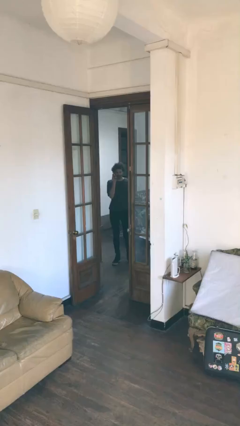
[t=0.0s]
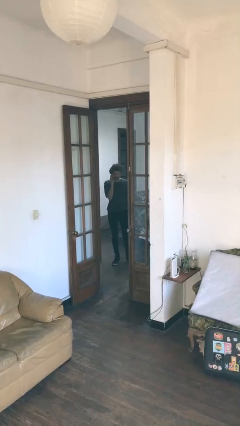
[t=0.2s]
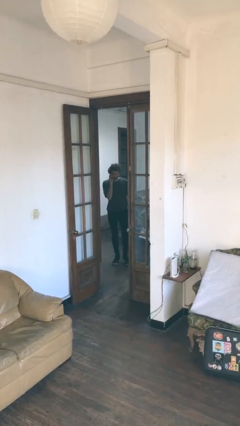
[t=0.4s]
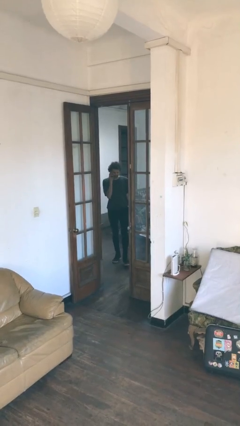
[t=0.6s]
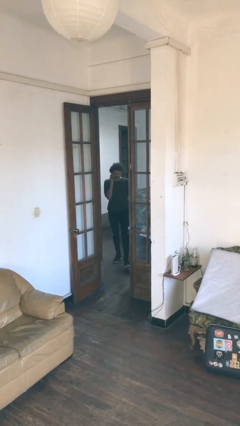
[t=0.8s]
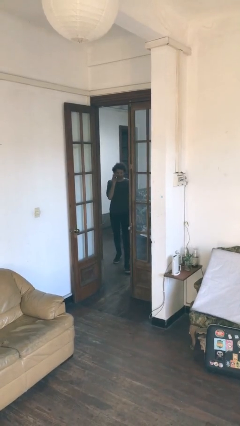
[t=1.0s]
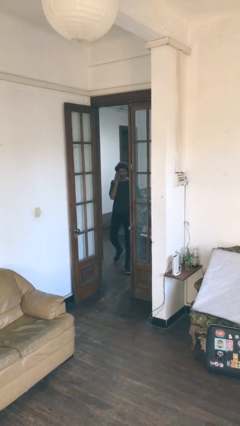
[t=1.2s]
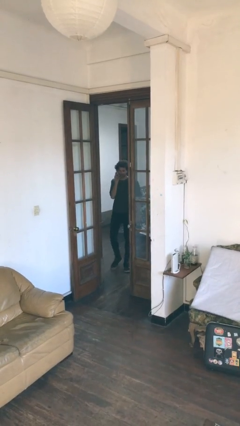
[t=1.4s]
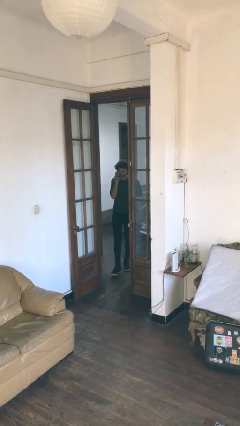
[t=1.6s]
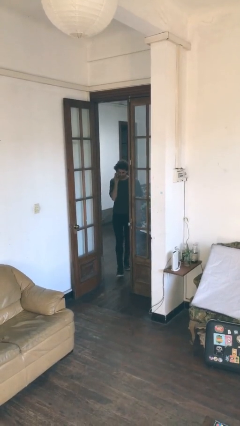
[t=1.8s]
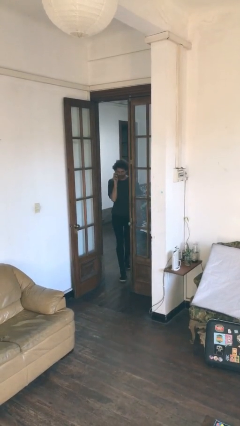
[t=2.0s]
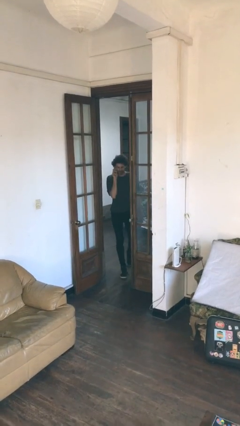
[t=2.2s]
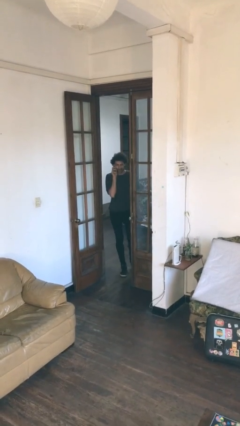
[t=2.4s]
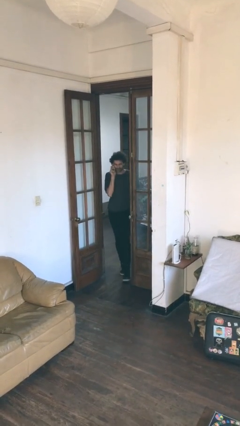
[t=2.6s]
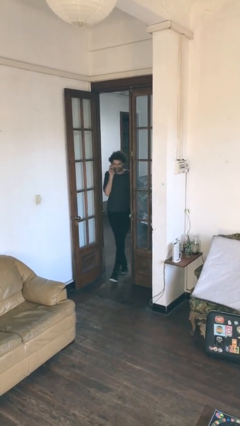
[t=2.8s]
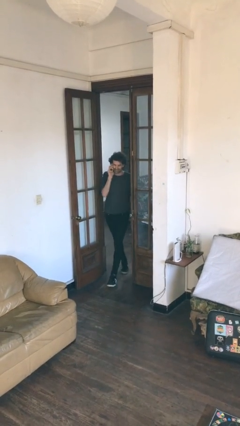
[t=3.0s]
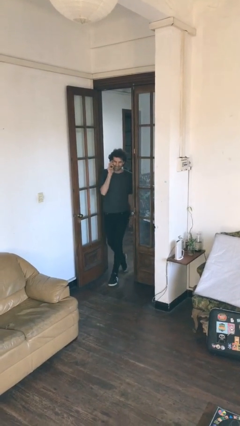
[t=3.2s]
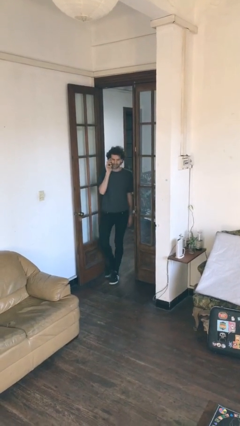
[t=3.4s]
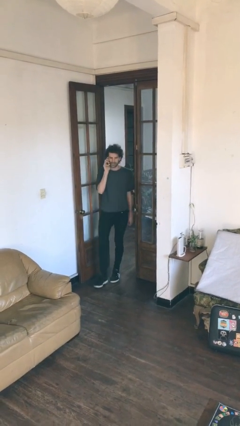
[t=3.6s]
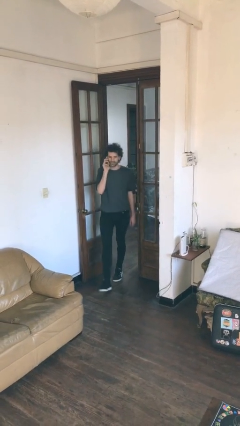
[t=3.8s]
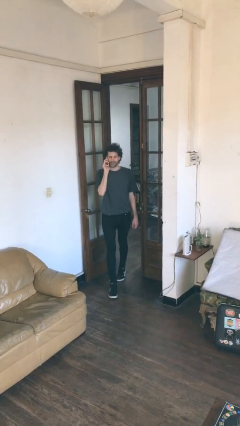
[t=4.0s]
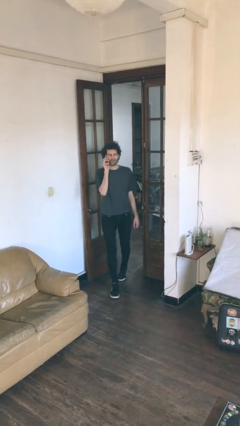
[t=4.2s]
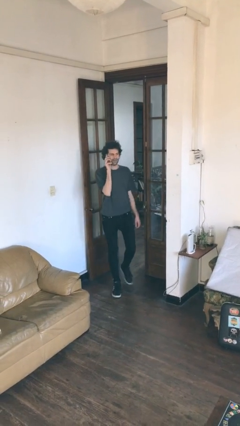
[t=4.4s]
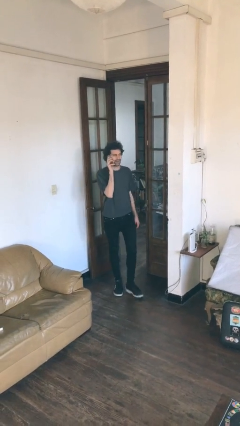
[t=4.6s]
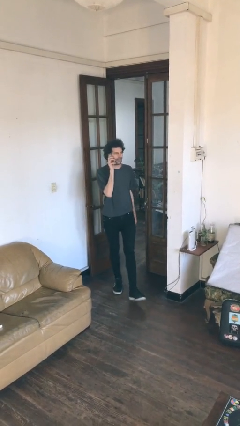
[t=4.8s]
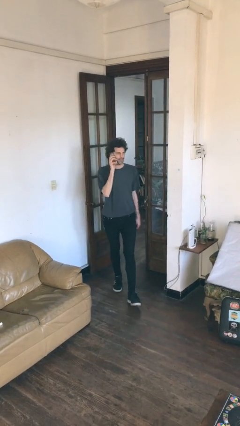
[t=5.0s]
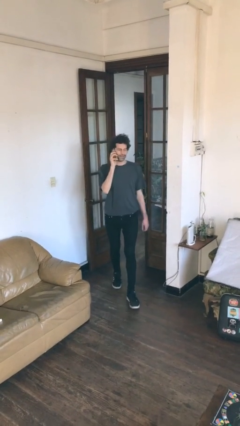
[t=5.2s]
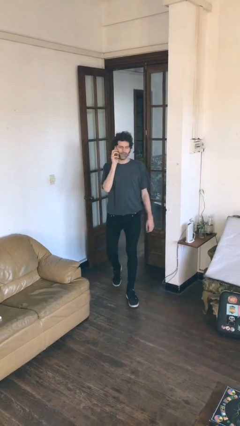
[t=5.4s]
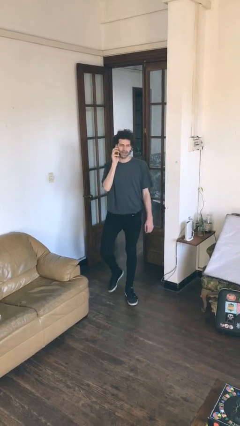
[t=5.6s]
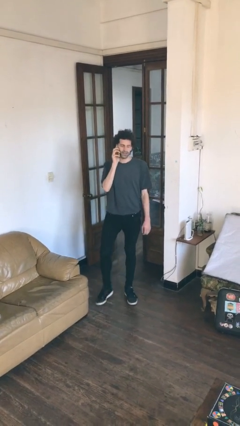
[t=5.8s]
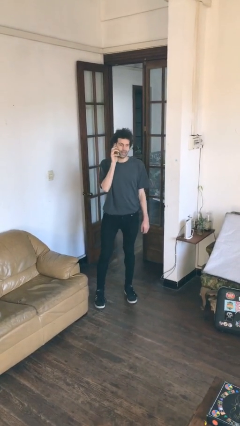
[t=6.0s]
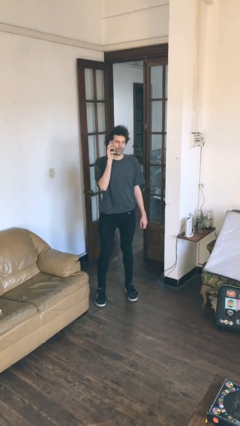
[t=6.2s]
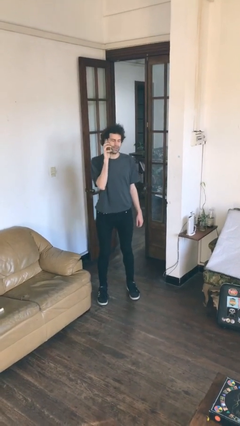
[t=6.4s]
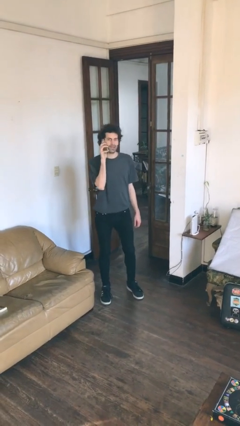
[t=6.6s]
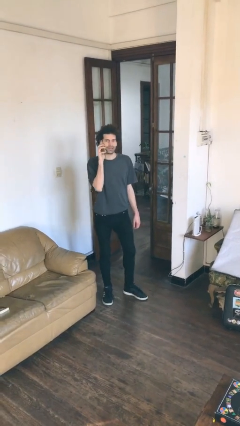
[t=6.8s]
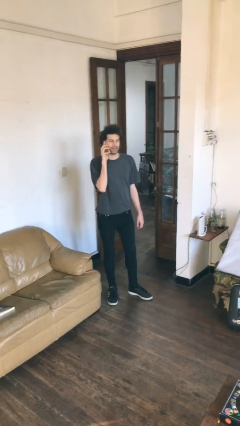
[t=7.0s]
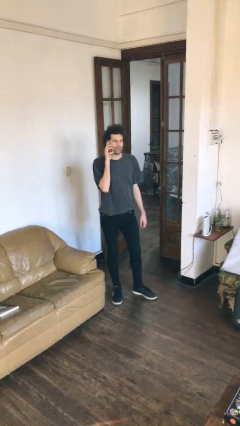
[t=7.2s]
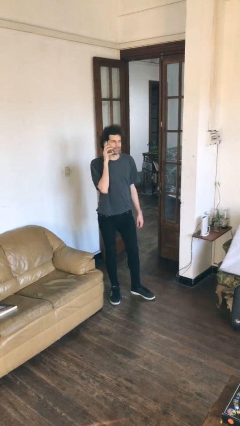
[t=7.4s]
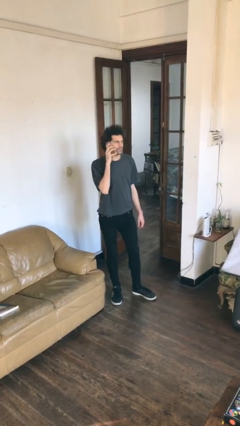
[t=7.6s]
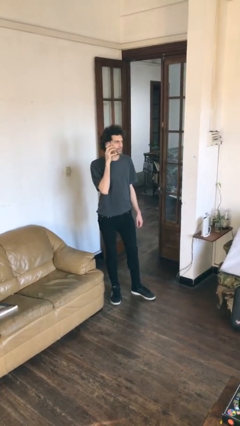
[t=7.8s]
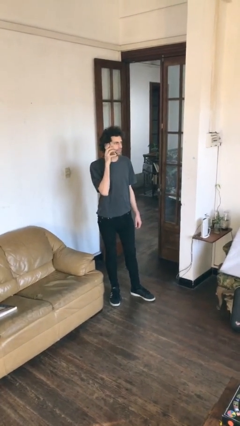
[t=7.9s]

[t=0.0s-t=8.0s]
person enters scene through structure

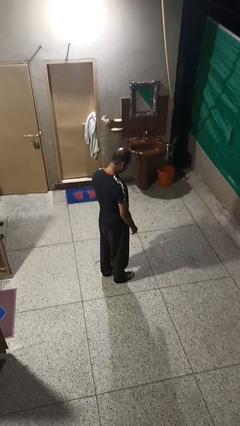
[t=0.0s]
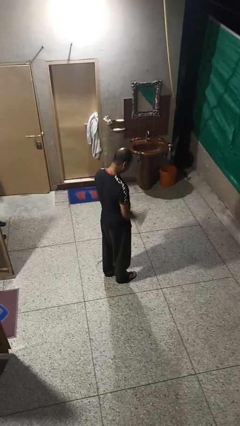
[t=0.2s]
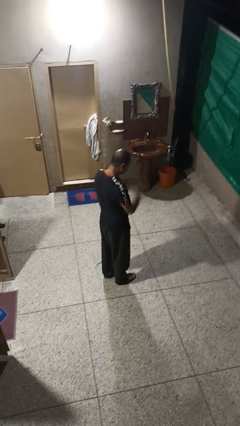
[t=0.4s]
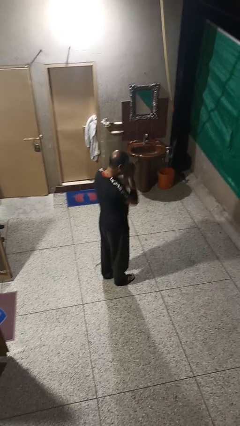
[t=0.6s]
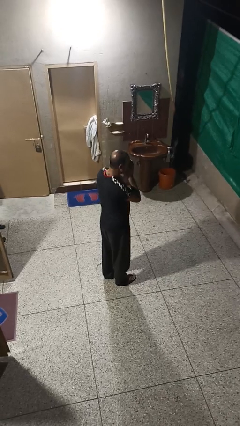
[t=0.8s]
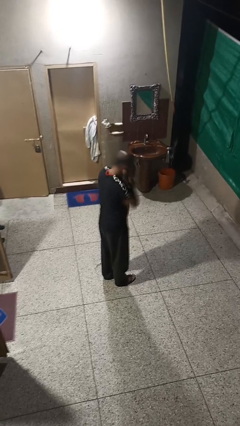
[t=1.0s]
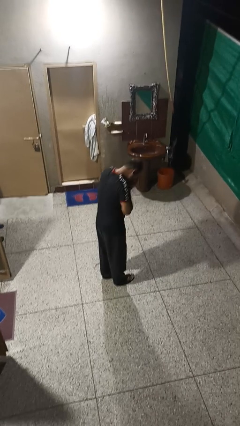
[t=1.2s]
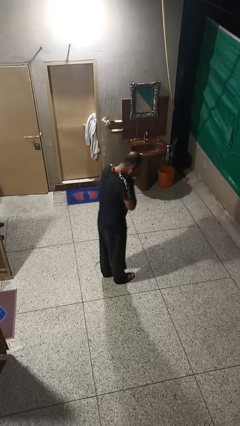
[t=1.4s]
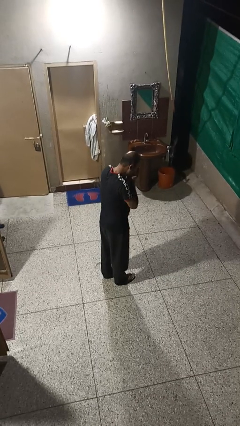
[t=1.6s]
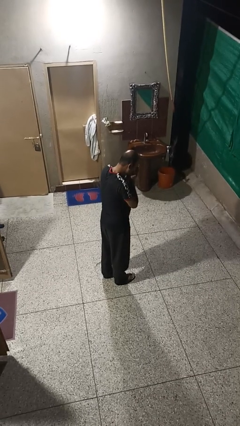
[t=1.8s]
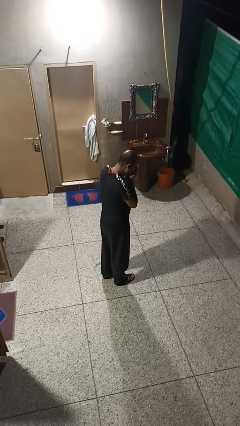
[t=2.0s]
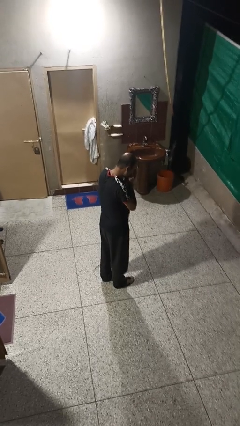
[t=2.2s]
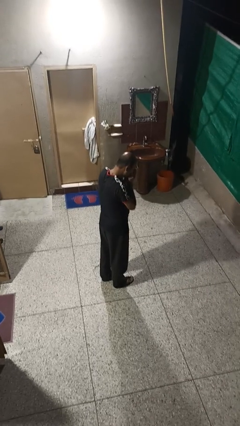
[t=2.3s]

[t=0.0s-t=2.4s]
person sneezes into hand

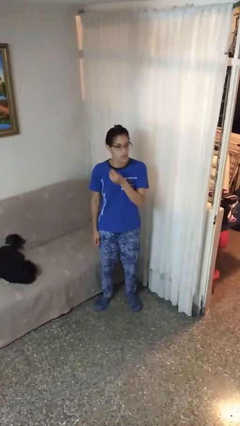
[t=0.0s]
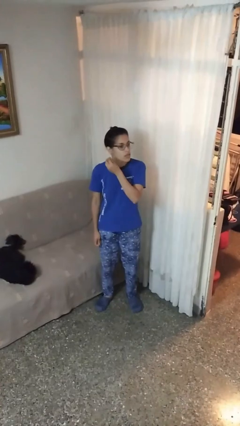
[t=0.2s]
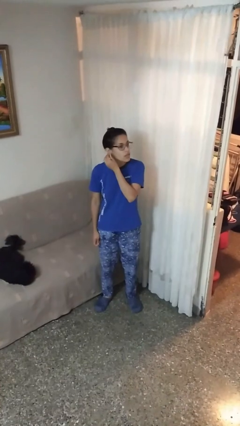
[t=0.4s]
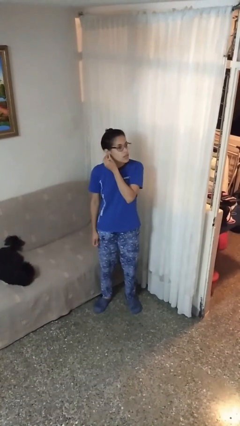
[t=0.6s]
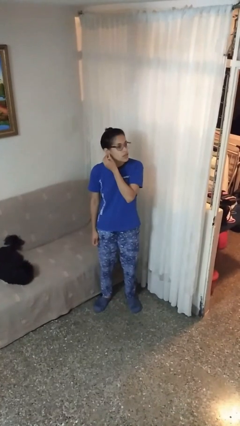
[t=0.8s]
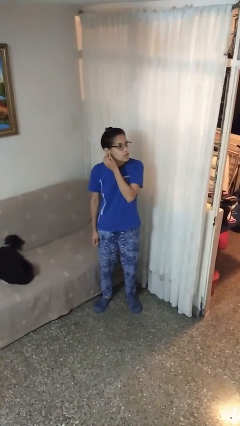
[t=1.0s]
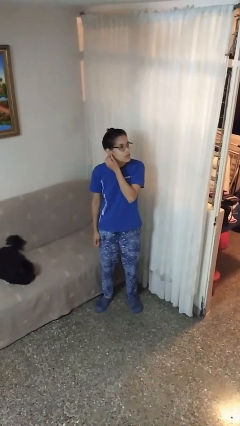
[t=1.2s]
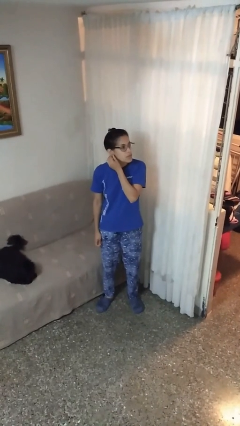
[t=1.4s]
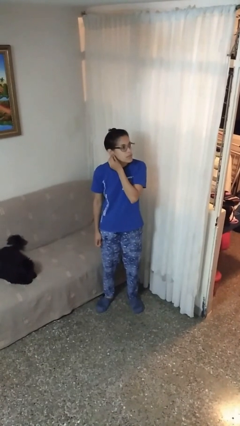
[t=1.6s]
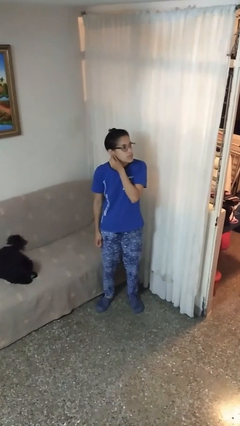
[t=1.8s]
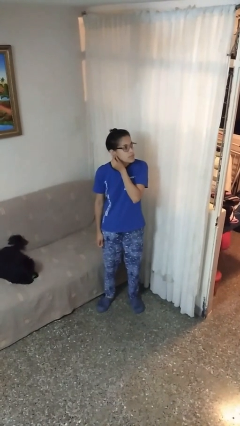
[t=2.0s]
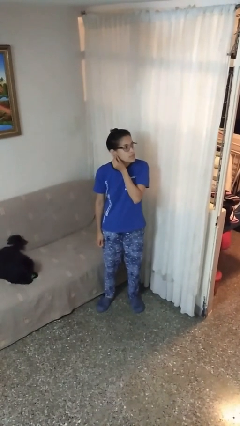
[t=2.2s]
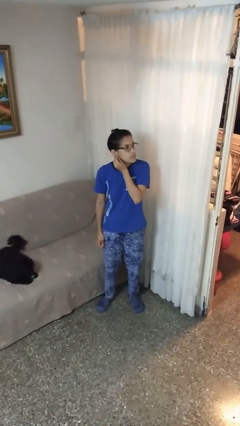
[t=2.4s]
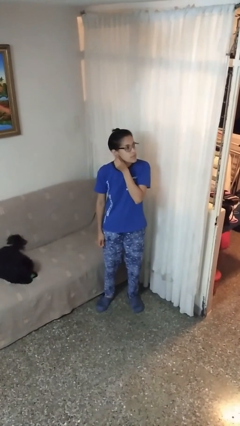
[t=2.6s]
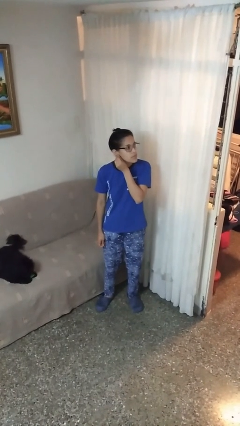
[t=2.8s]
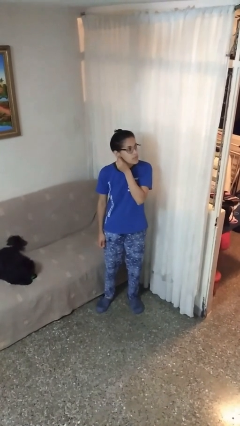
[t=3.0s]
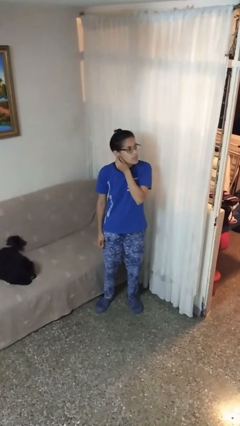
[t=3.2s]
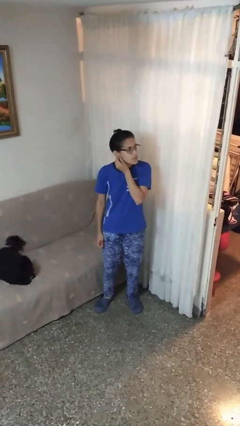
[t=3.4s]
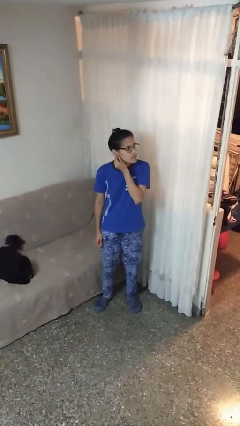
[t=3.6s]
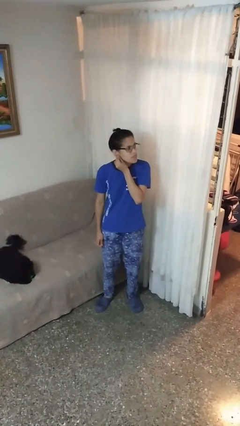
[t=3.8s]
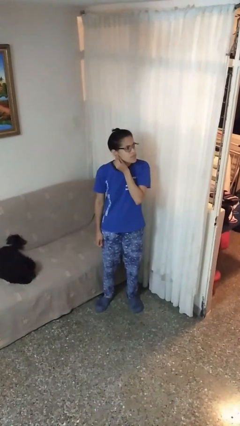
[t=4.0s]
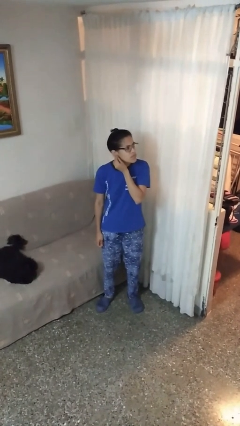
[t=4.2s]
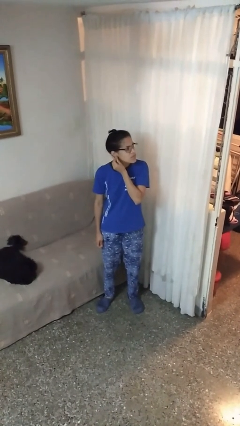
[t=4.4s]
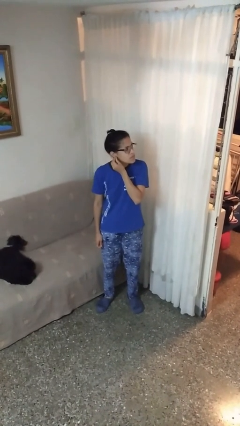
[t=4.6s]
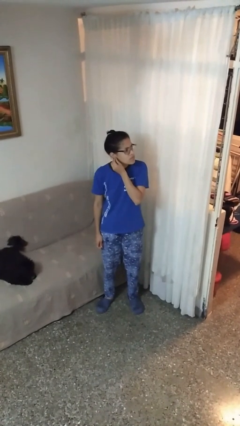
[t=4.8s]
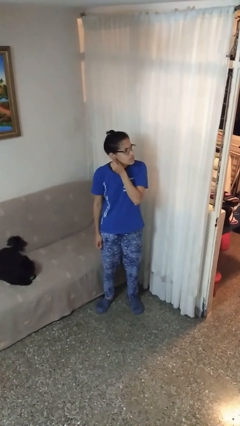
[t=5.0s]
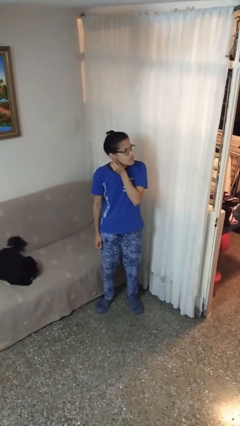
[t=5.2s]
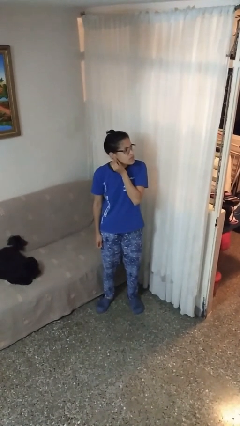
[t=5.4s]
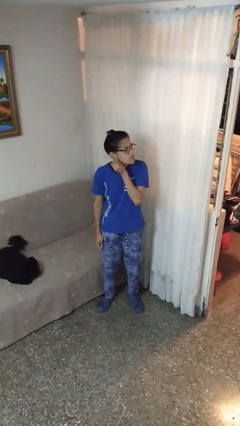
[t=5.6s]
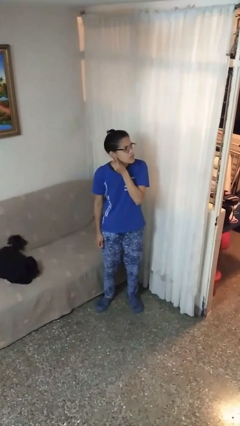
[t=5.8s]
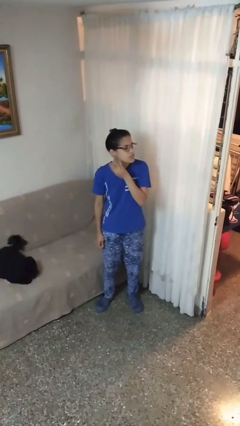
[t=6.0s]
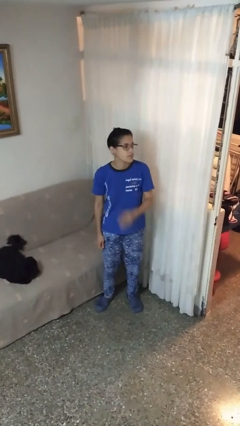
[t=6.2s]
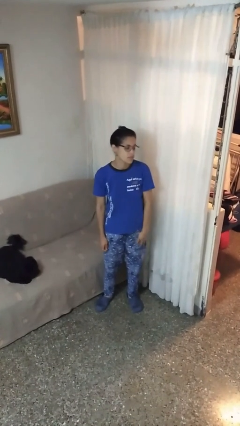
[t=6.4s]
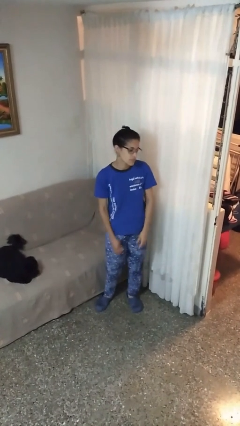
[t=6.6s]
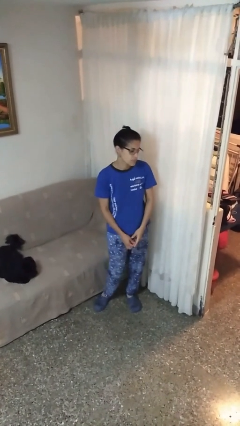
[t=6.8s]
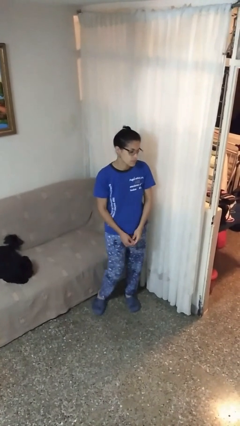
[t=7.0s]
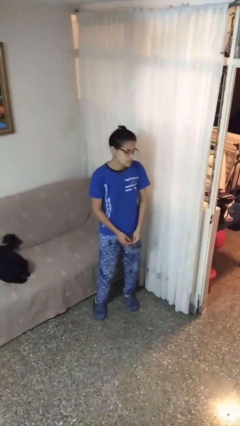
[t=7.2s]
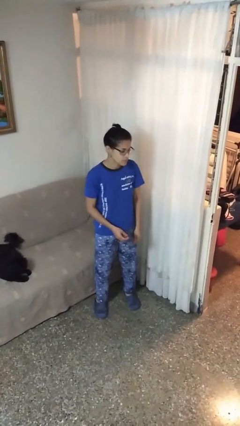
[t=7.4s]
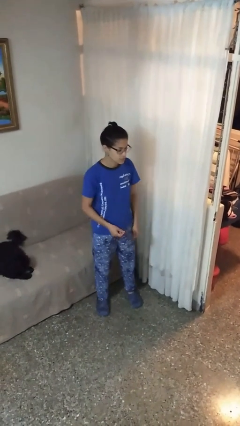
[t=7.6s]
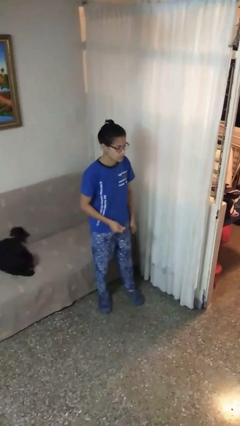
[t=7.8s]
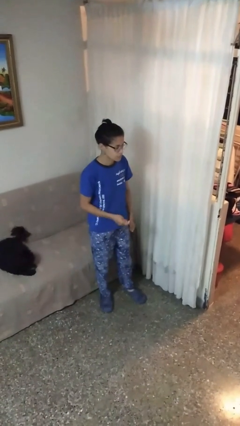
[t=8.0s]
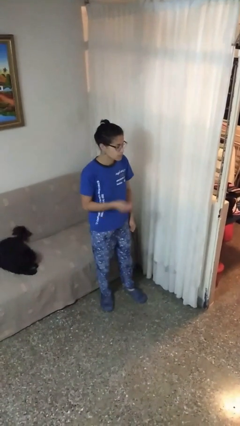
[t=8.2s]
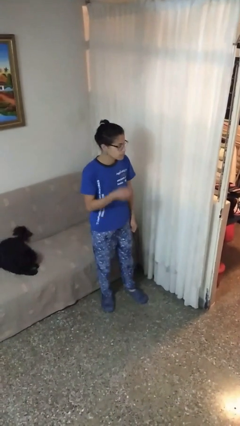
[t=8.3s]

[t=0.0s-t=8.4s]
person puts on earrings
